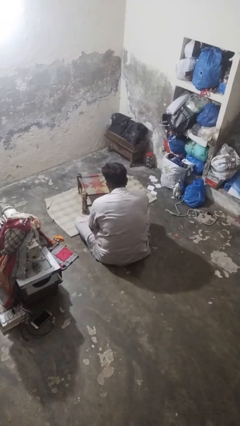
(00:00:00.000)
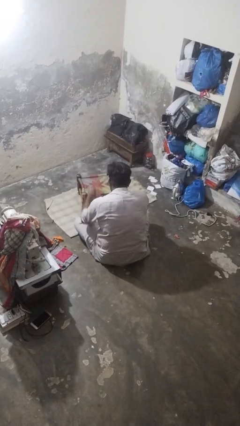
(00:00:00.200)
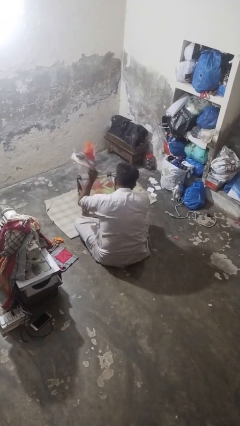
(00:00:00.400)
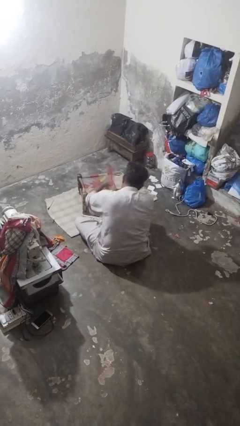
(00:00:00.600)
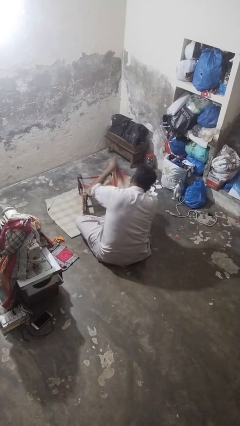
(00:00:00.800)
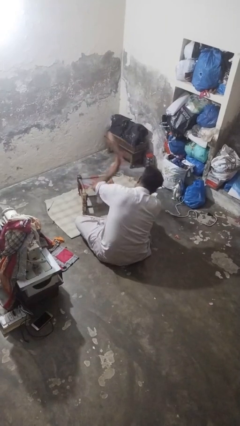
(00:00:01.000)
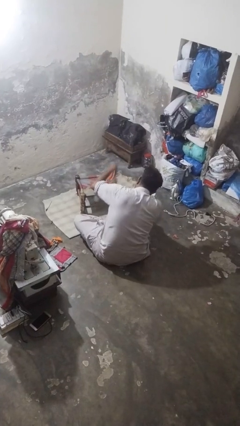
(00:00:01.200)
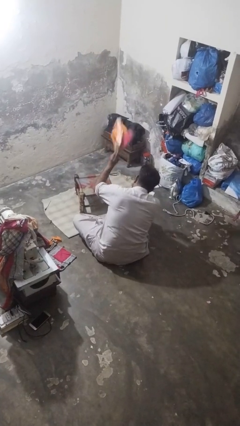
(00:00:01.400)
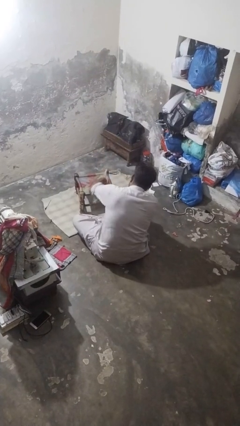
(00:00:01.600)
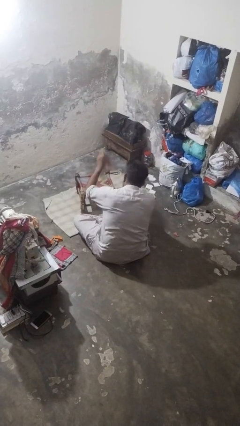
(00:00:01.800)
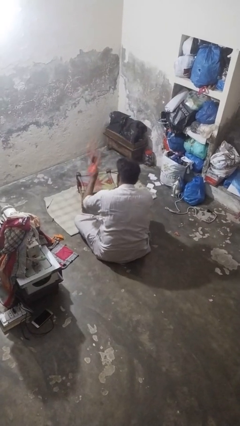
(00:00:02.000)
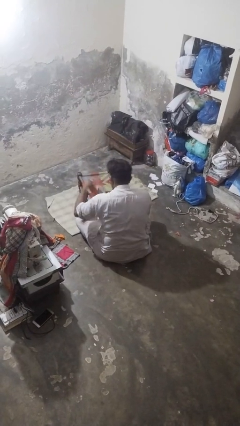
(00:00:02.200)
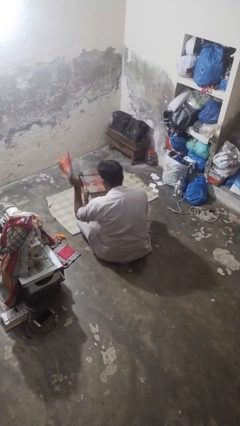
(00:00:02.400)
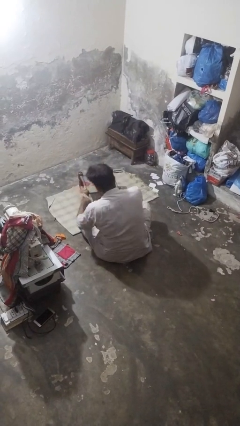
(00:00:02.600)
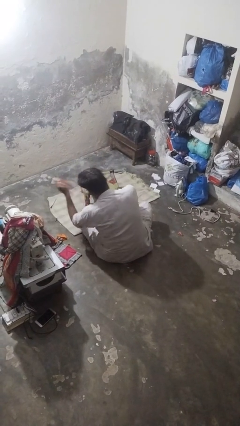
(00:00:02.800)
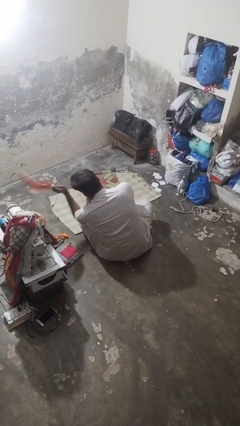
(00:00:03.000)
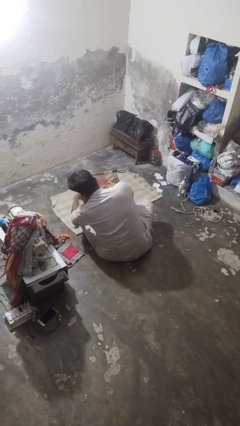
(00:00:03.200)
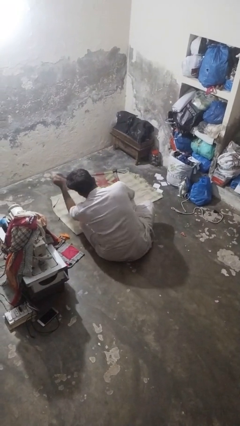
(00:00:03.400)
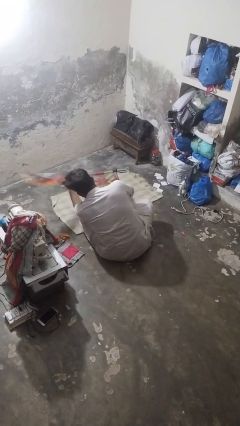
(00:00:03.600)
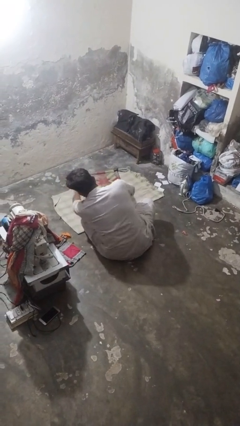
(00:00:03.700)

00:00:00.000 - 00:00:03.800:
person dusts furniture

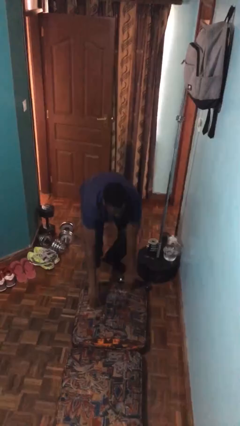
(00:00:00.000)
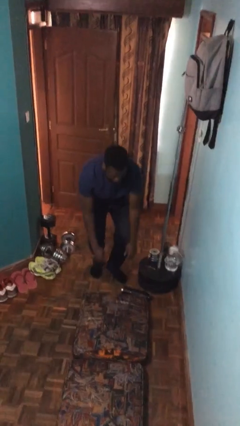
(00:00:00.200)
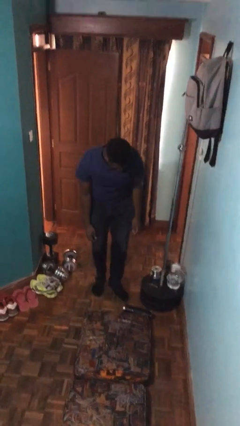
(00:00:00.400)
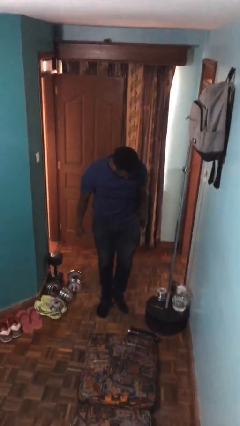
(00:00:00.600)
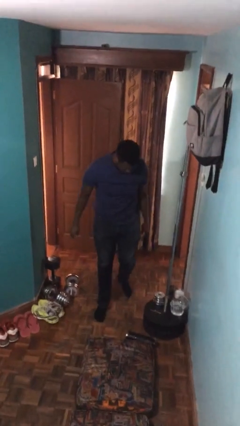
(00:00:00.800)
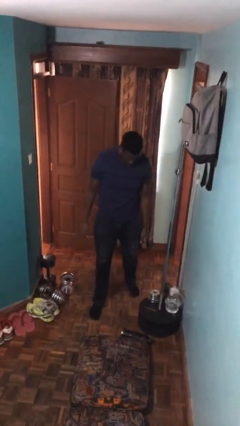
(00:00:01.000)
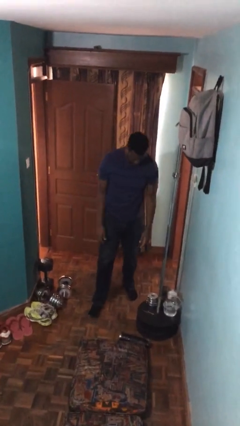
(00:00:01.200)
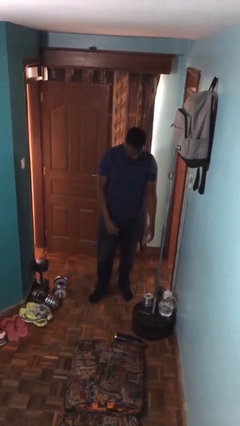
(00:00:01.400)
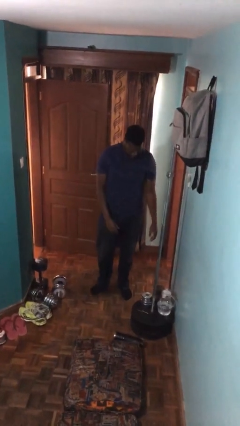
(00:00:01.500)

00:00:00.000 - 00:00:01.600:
person stands up from floor

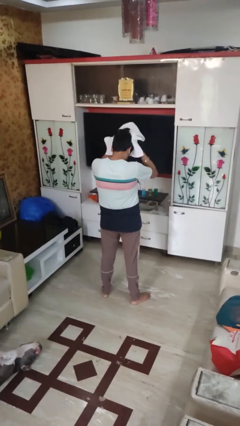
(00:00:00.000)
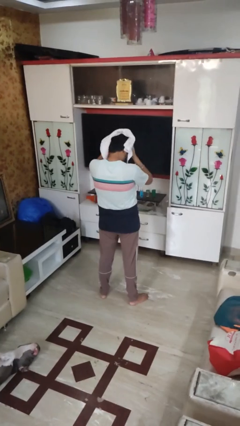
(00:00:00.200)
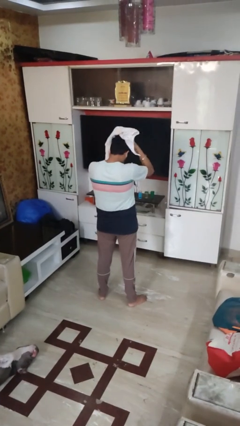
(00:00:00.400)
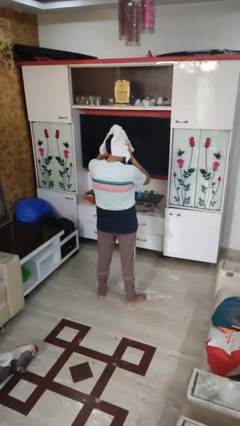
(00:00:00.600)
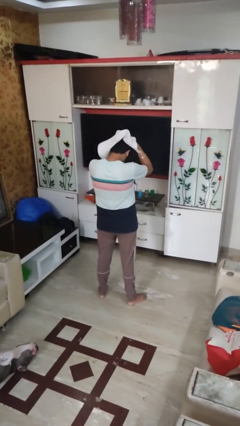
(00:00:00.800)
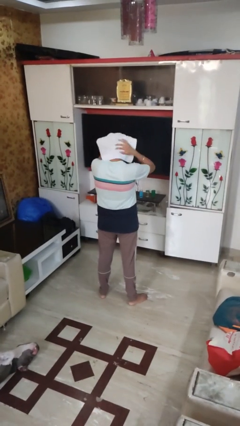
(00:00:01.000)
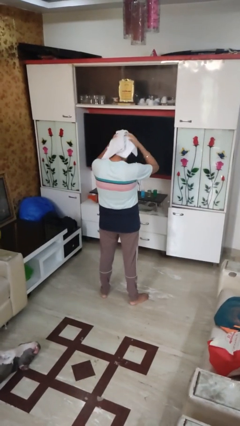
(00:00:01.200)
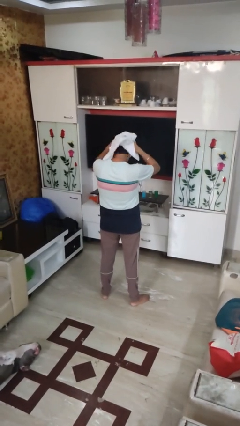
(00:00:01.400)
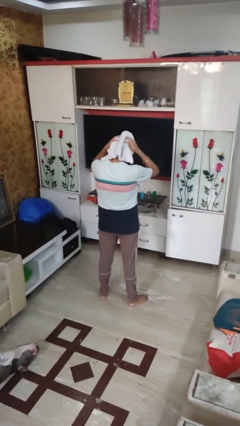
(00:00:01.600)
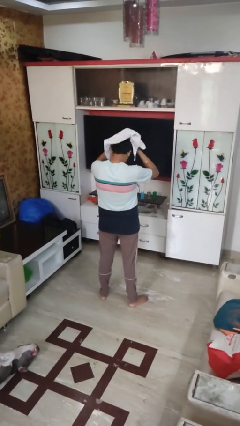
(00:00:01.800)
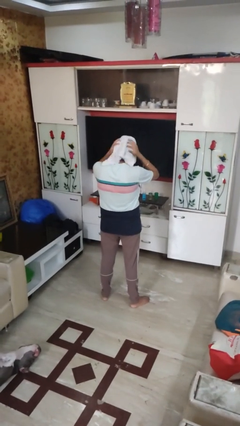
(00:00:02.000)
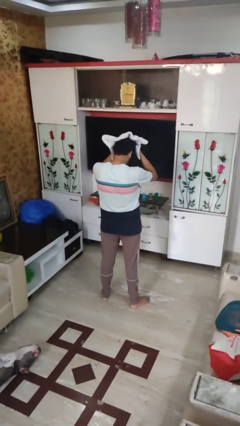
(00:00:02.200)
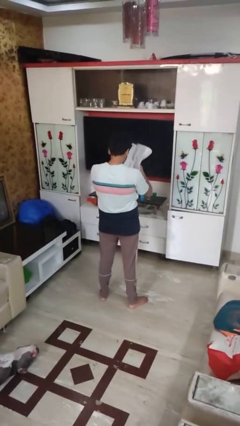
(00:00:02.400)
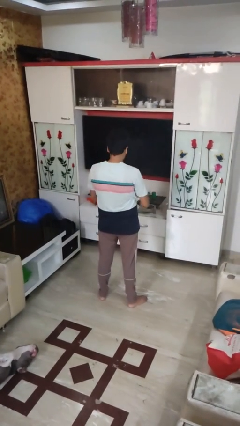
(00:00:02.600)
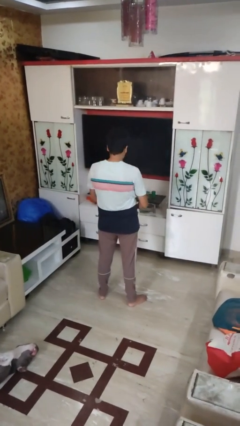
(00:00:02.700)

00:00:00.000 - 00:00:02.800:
person dries hair with towel

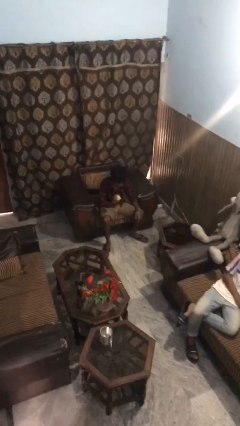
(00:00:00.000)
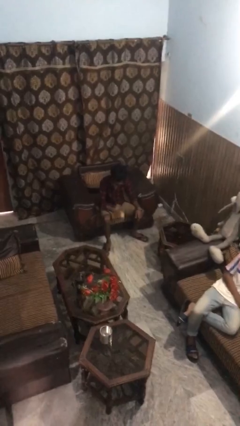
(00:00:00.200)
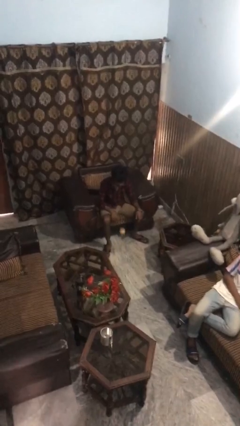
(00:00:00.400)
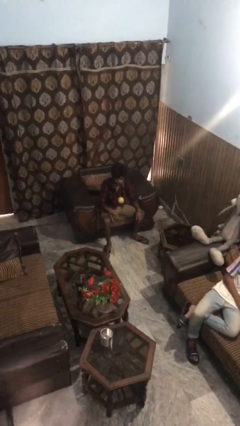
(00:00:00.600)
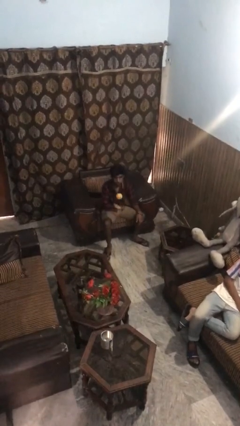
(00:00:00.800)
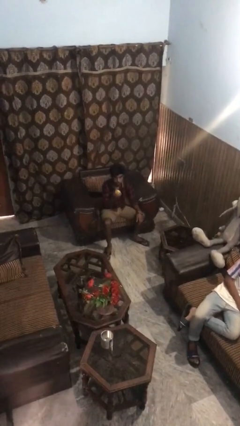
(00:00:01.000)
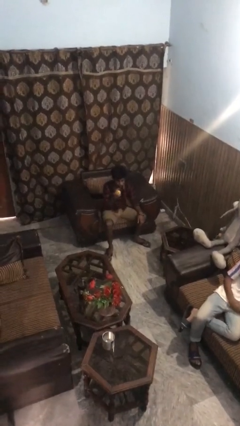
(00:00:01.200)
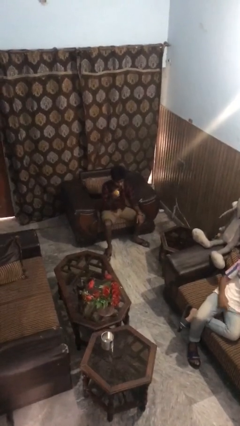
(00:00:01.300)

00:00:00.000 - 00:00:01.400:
person bounces ball on floor

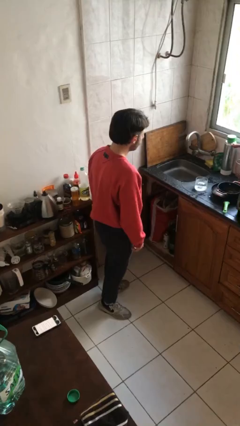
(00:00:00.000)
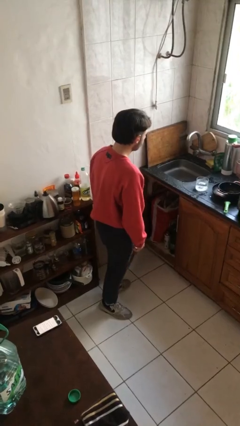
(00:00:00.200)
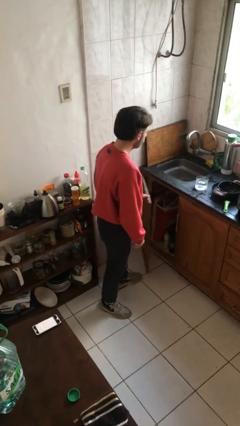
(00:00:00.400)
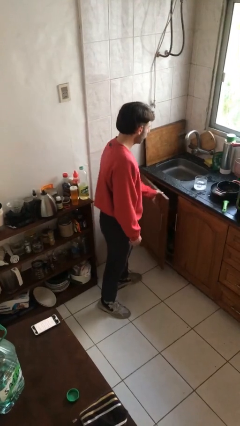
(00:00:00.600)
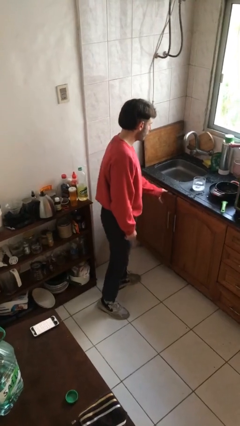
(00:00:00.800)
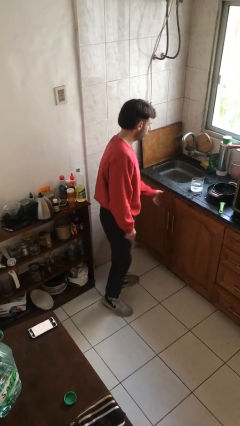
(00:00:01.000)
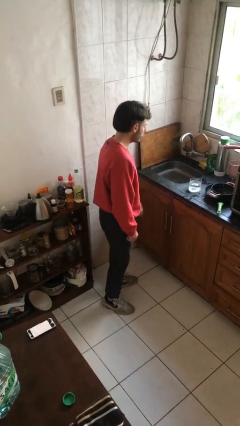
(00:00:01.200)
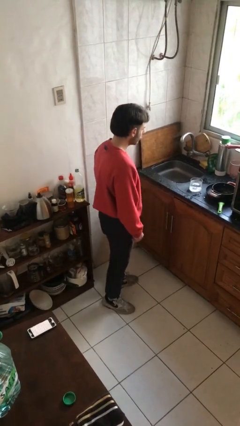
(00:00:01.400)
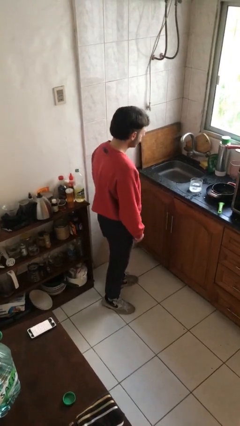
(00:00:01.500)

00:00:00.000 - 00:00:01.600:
person closes cabinet

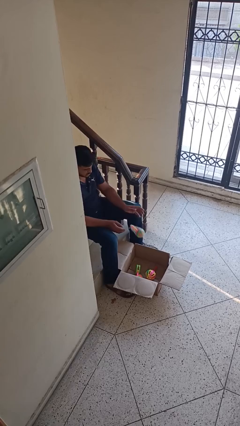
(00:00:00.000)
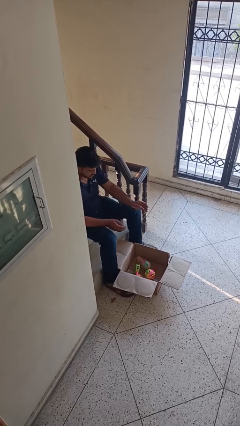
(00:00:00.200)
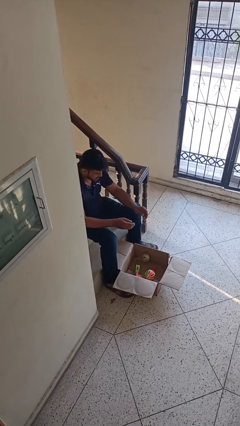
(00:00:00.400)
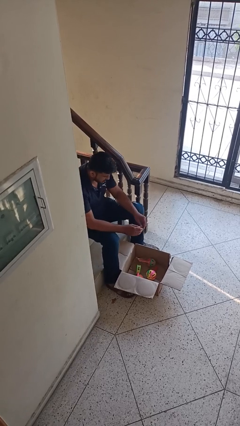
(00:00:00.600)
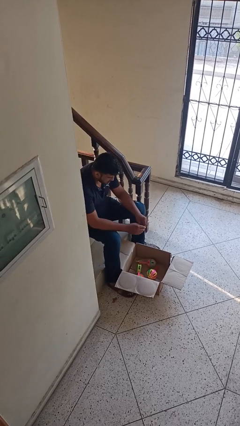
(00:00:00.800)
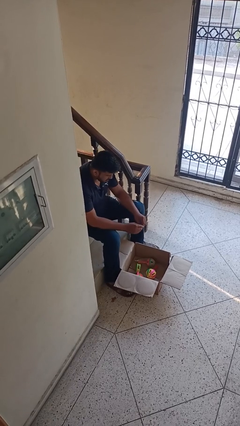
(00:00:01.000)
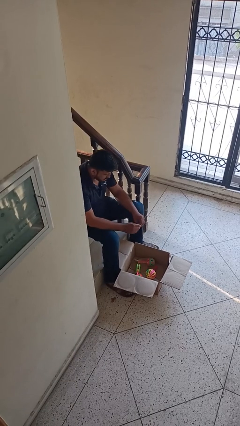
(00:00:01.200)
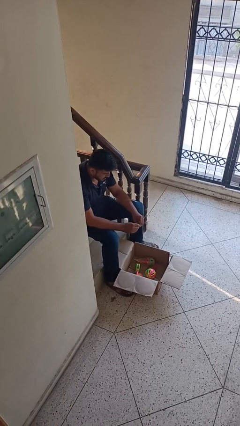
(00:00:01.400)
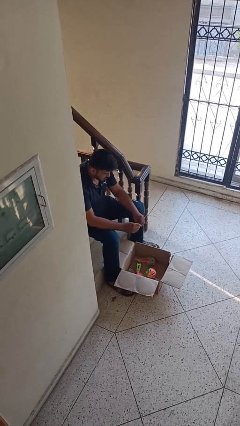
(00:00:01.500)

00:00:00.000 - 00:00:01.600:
person puts object into box

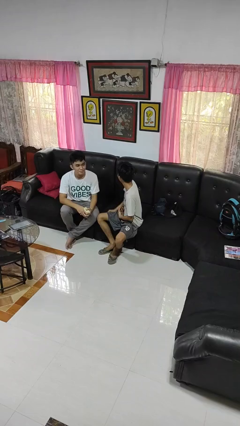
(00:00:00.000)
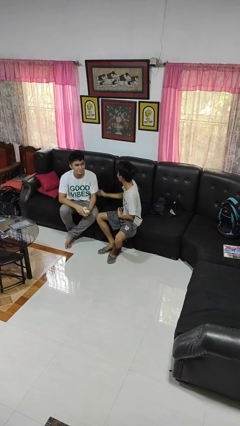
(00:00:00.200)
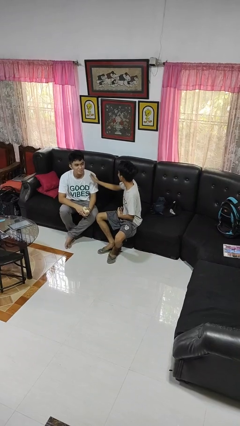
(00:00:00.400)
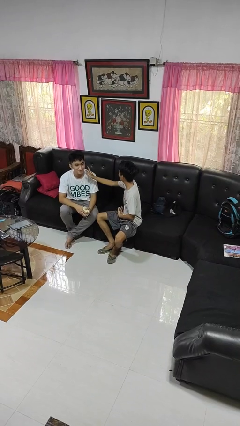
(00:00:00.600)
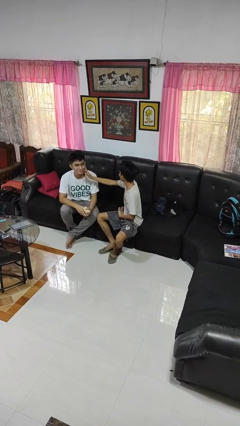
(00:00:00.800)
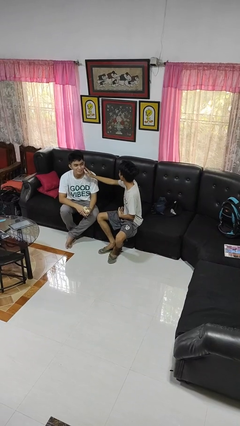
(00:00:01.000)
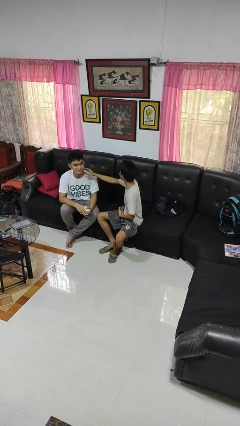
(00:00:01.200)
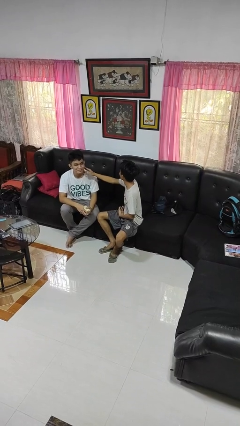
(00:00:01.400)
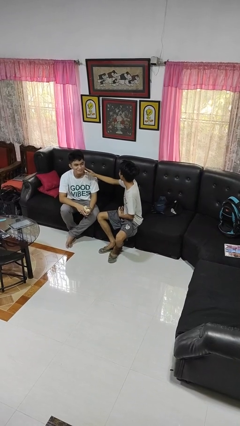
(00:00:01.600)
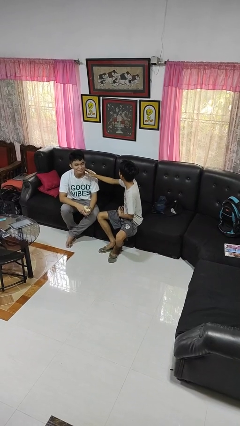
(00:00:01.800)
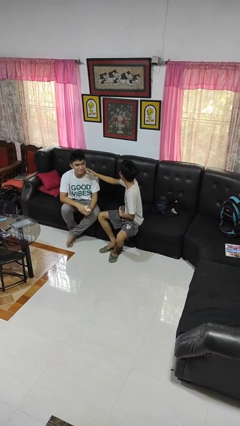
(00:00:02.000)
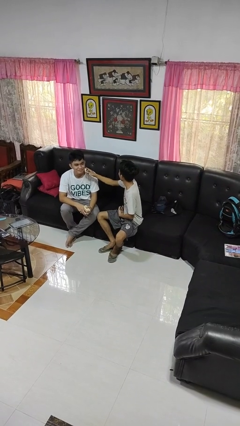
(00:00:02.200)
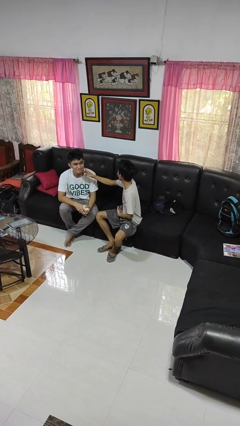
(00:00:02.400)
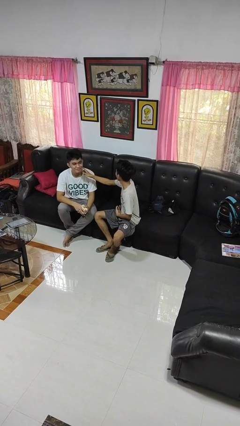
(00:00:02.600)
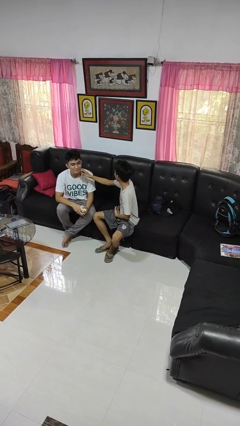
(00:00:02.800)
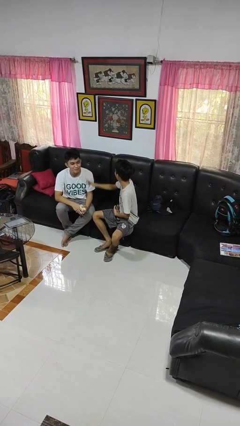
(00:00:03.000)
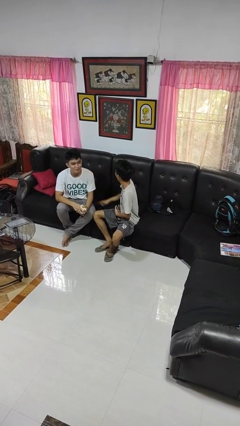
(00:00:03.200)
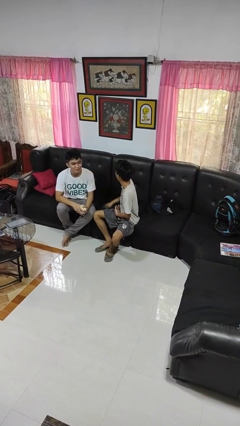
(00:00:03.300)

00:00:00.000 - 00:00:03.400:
person touches face of person

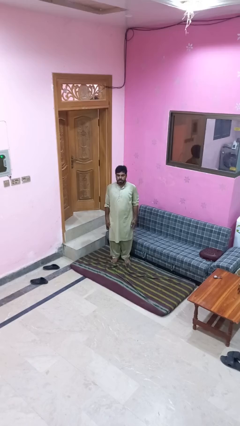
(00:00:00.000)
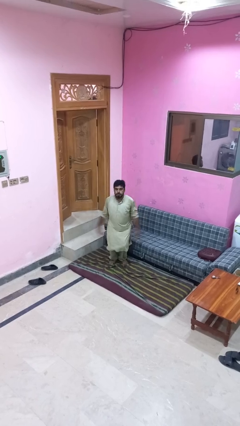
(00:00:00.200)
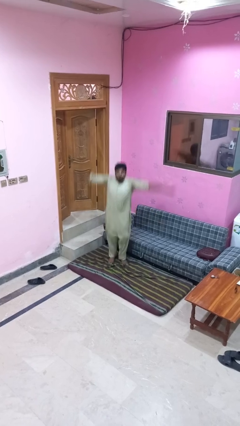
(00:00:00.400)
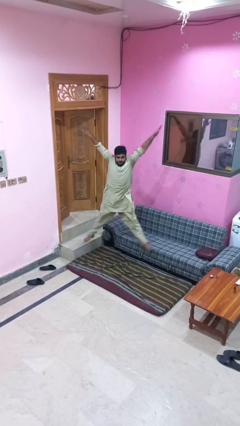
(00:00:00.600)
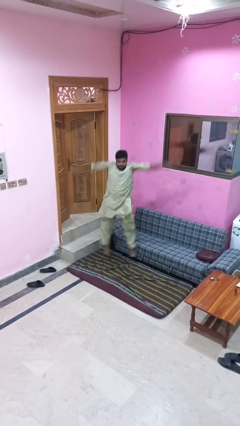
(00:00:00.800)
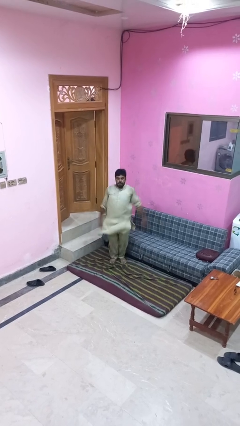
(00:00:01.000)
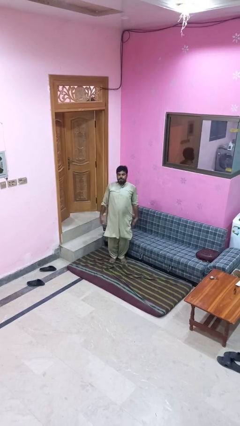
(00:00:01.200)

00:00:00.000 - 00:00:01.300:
person exercises with jumping jacks
